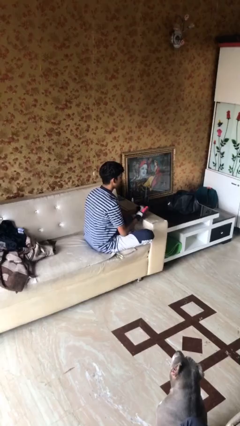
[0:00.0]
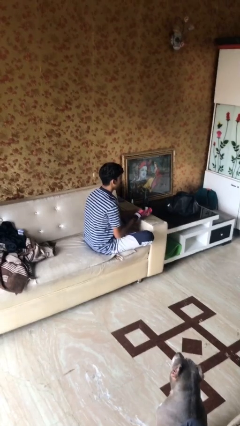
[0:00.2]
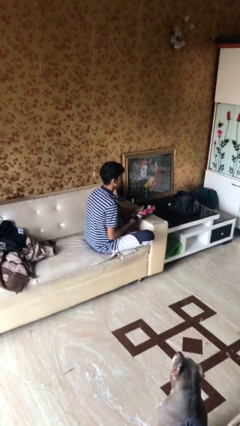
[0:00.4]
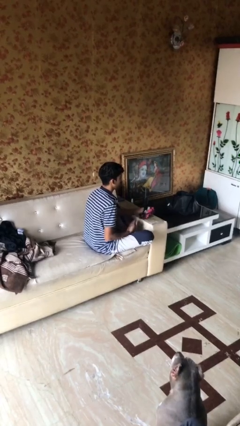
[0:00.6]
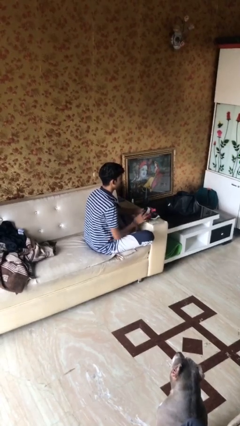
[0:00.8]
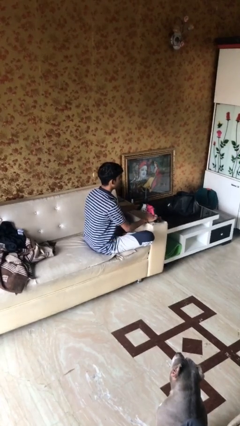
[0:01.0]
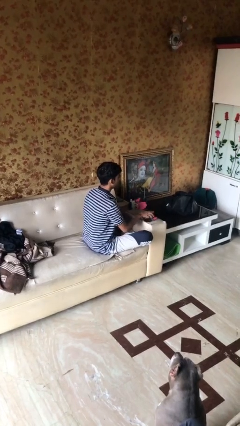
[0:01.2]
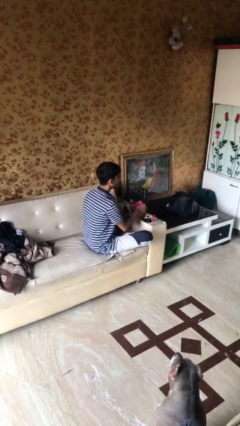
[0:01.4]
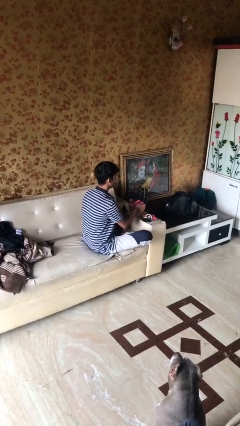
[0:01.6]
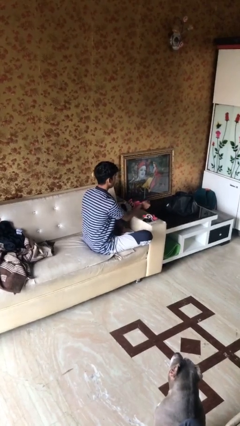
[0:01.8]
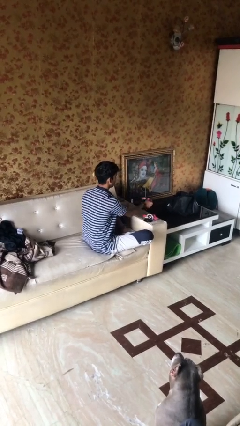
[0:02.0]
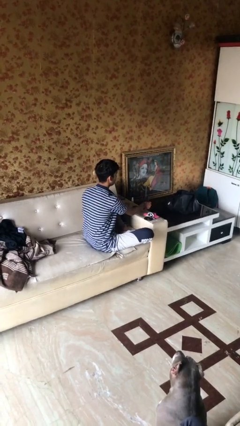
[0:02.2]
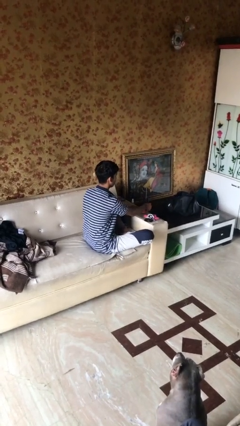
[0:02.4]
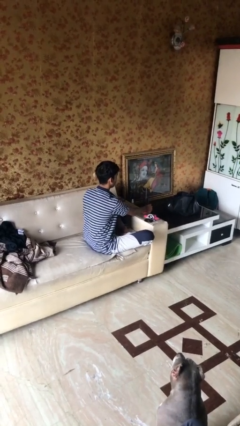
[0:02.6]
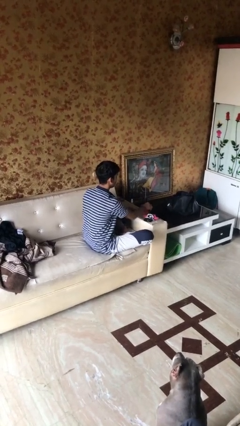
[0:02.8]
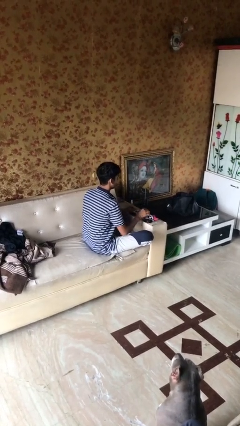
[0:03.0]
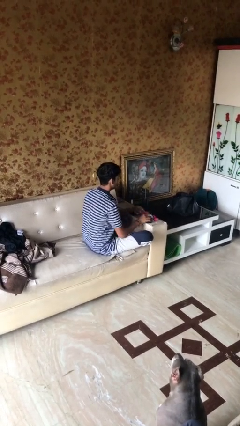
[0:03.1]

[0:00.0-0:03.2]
person takes off gloves

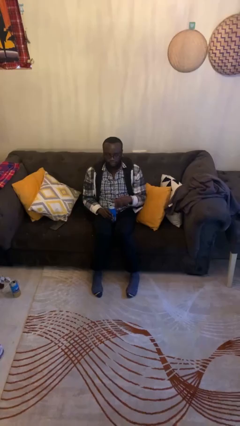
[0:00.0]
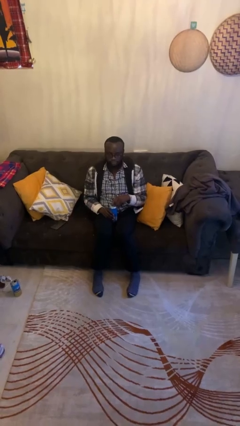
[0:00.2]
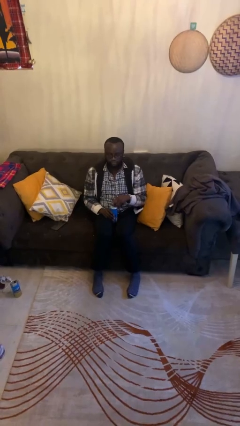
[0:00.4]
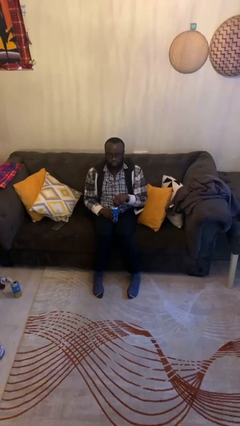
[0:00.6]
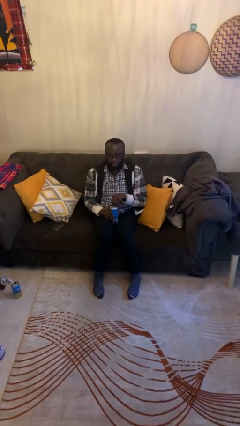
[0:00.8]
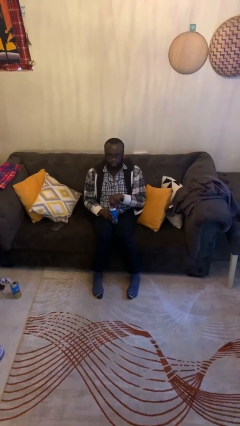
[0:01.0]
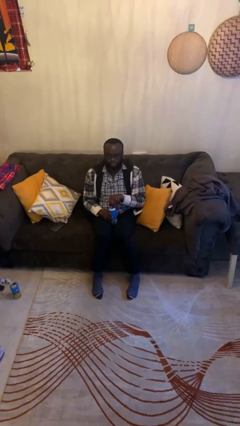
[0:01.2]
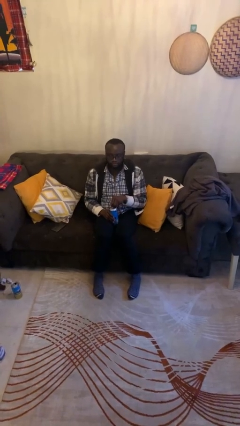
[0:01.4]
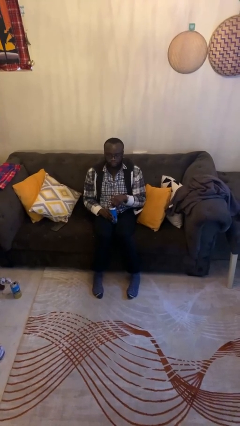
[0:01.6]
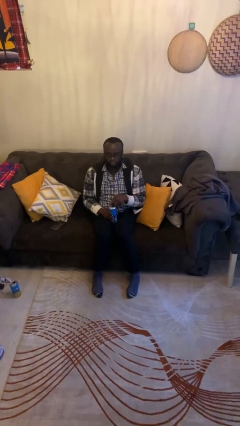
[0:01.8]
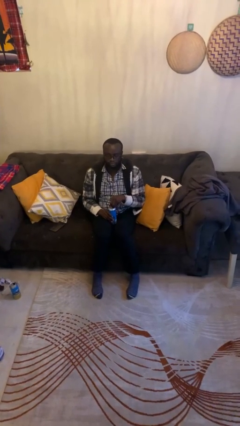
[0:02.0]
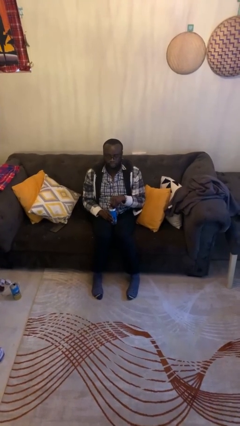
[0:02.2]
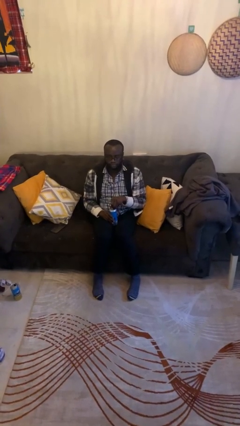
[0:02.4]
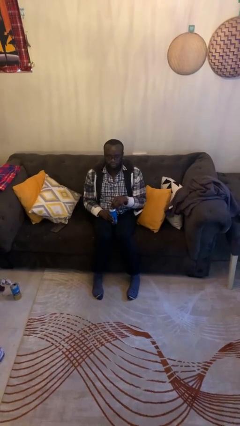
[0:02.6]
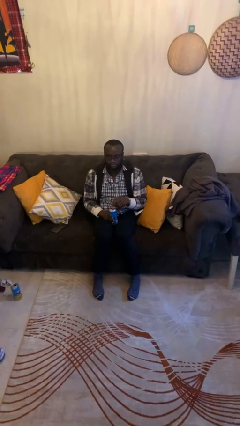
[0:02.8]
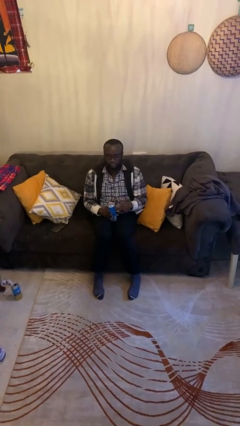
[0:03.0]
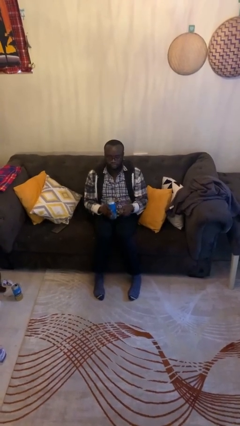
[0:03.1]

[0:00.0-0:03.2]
person opens beverage can

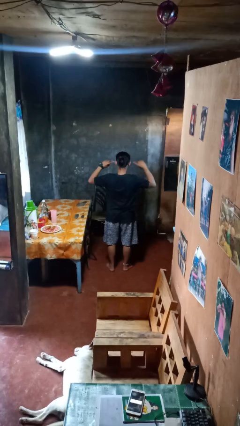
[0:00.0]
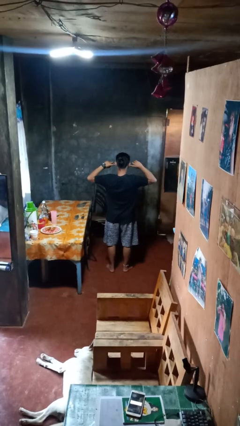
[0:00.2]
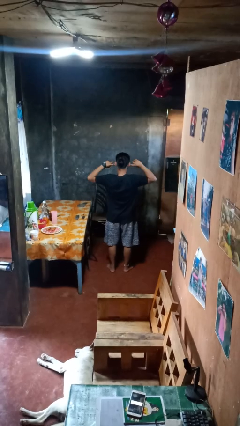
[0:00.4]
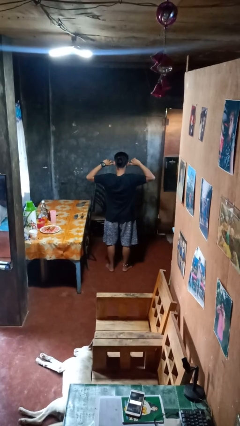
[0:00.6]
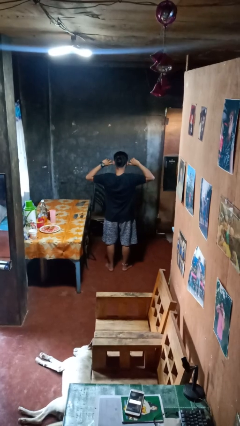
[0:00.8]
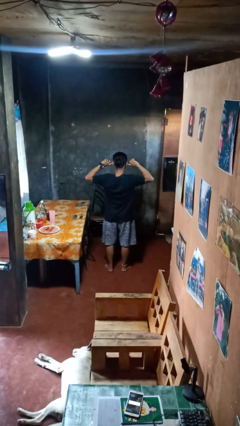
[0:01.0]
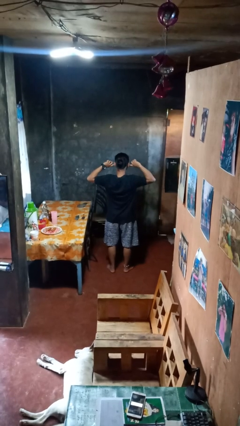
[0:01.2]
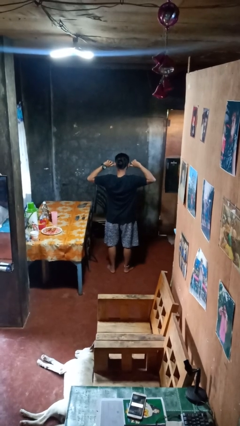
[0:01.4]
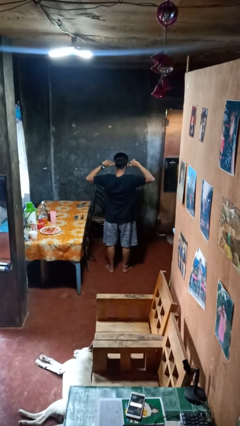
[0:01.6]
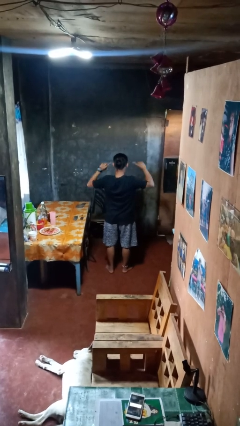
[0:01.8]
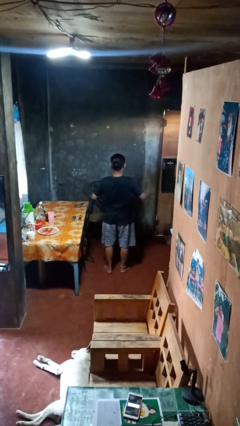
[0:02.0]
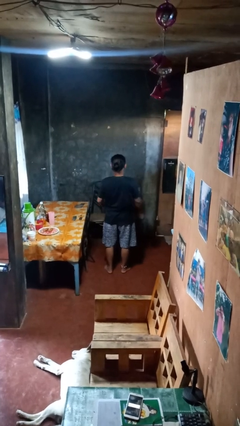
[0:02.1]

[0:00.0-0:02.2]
person puts fingers in ear

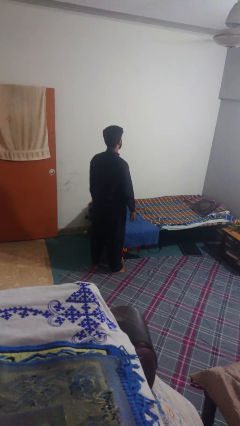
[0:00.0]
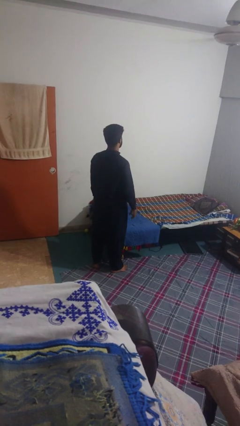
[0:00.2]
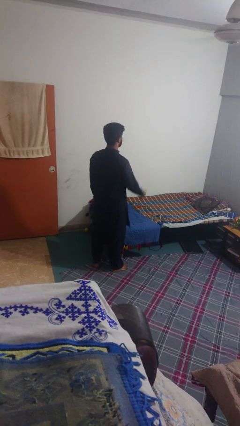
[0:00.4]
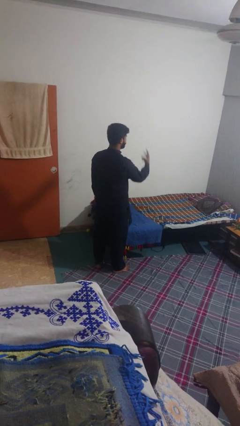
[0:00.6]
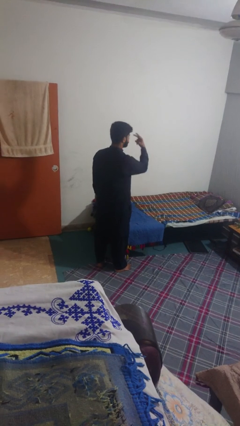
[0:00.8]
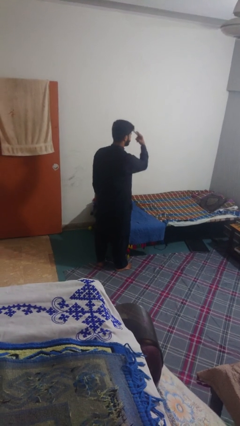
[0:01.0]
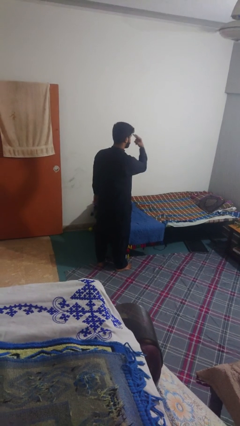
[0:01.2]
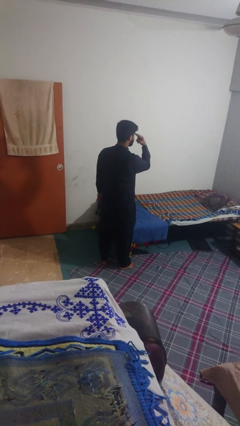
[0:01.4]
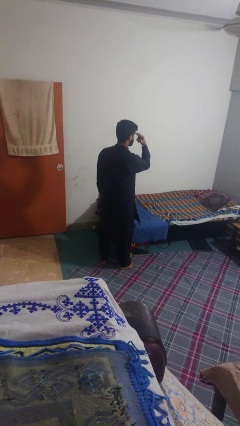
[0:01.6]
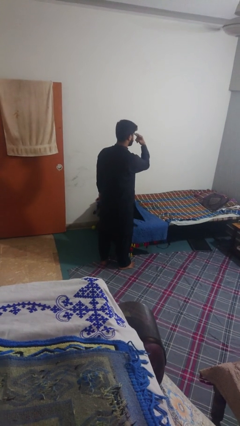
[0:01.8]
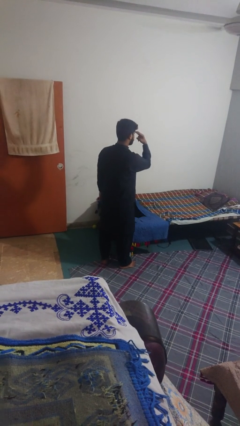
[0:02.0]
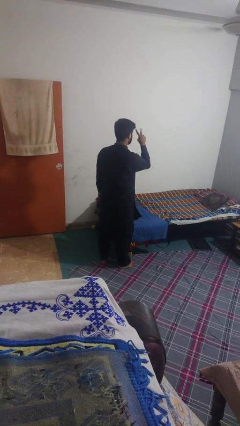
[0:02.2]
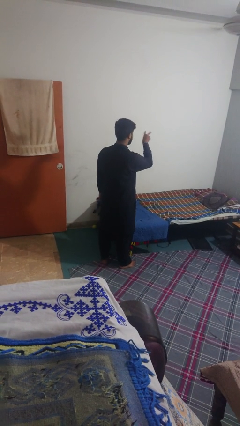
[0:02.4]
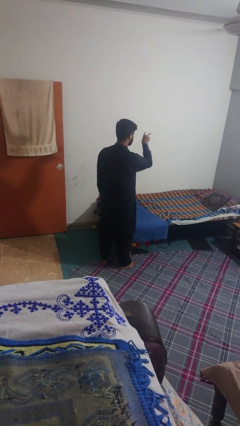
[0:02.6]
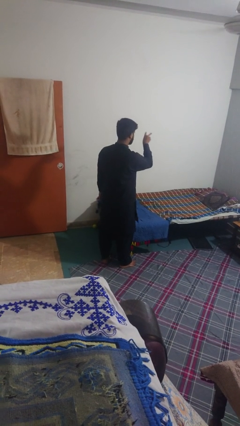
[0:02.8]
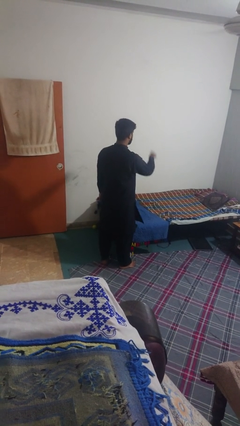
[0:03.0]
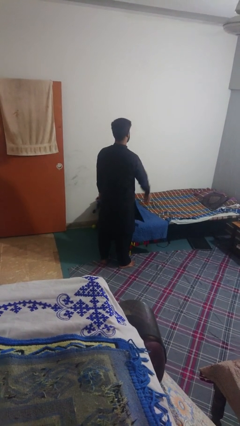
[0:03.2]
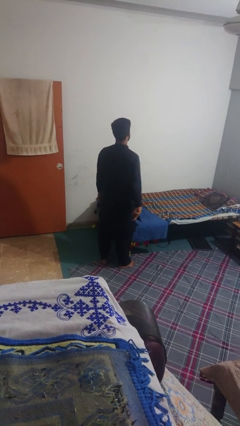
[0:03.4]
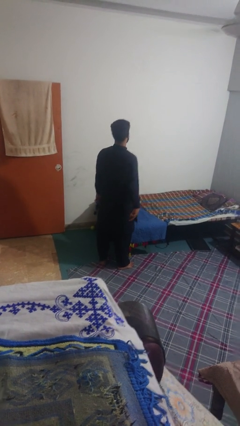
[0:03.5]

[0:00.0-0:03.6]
person gestures watch closely

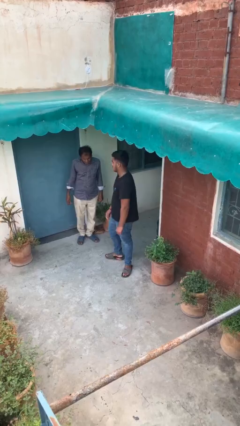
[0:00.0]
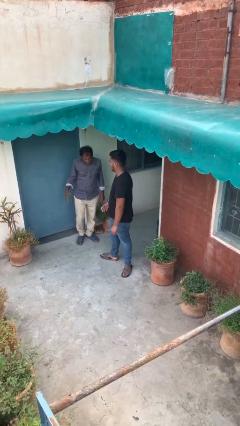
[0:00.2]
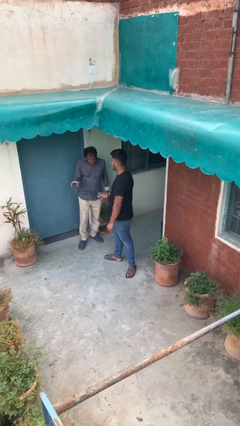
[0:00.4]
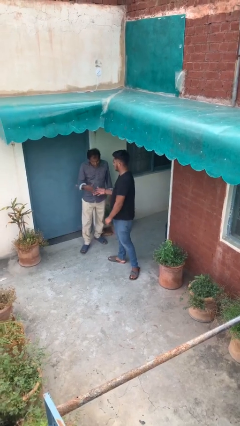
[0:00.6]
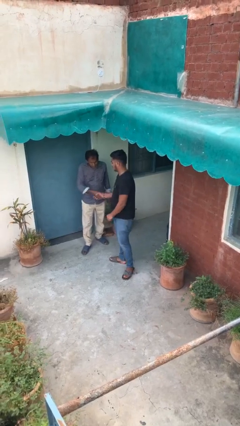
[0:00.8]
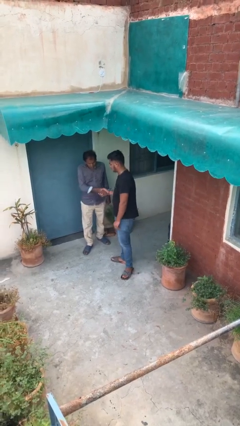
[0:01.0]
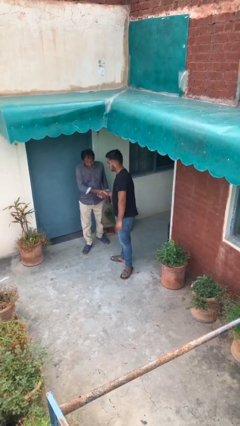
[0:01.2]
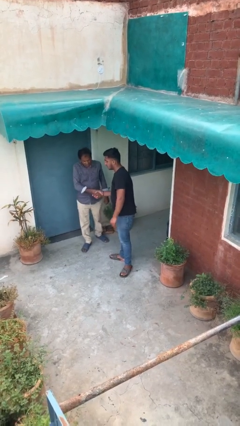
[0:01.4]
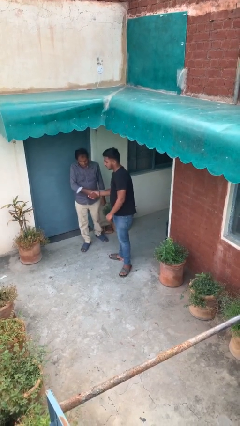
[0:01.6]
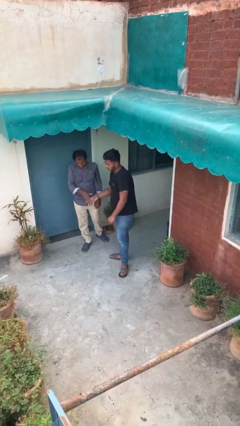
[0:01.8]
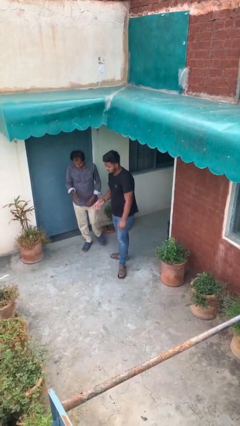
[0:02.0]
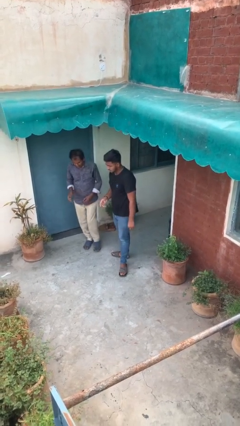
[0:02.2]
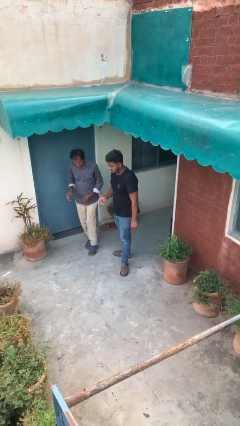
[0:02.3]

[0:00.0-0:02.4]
person shakes hand

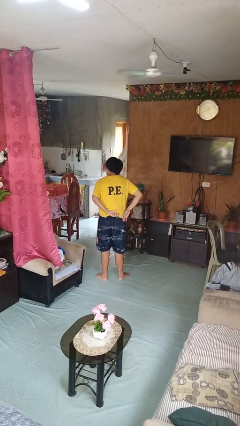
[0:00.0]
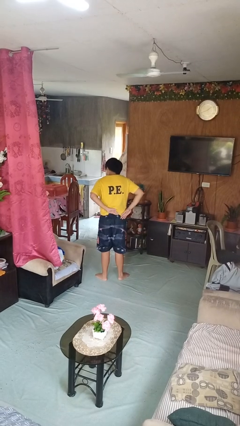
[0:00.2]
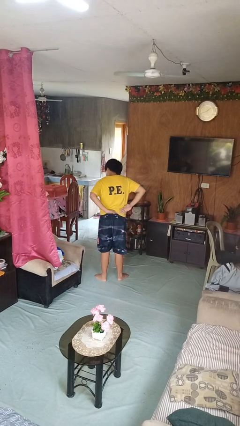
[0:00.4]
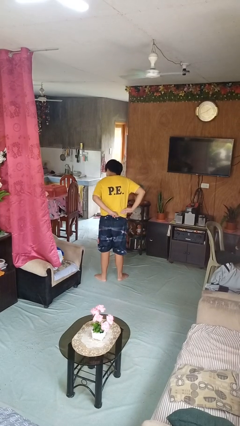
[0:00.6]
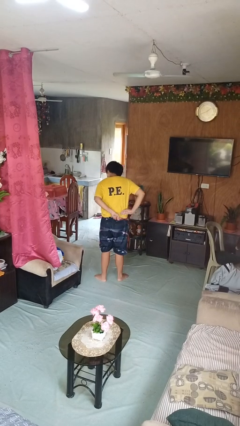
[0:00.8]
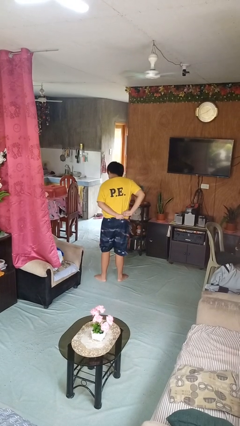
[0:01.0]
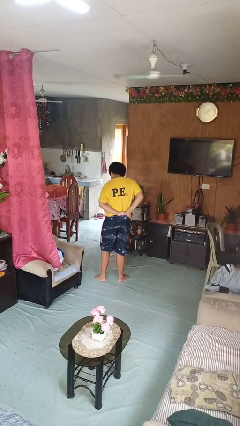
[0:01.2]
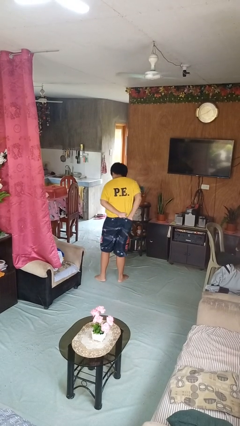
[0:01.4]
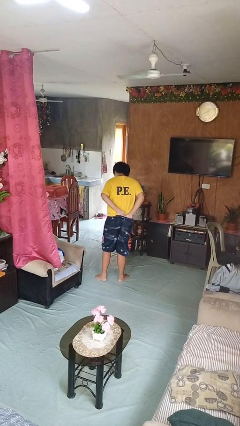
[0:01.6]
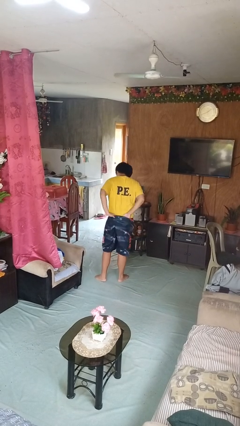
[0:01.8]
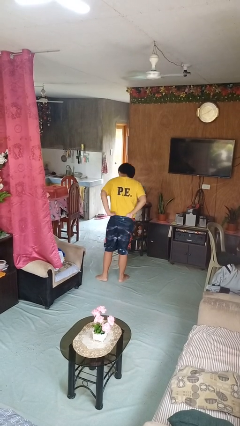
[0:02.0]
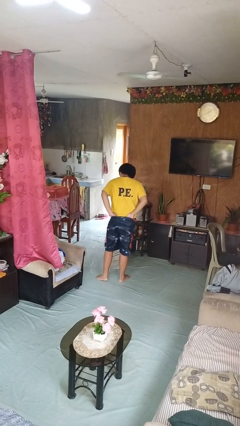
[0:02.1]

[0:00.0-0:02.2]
person tucks in shirt

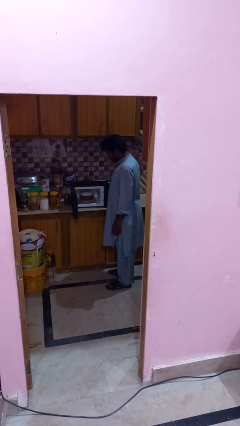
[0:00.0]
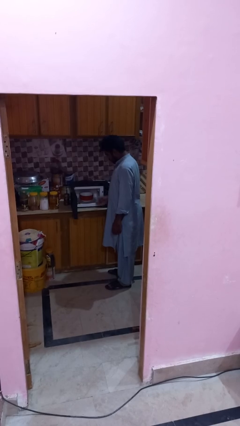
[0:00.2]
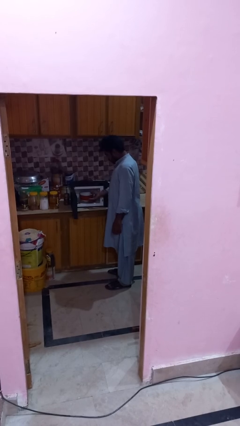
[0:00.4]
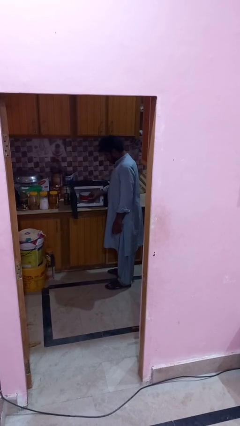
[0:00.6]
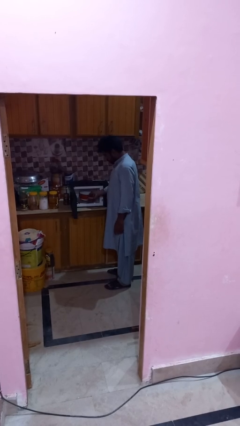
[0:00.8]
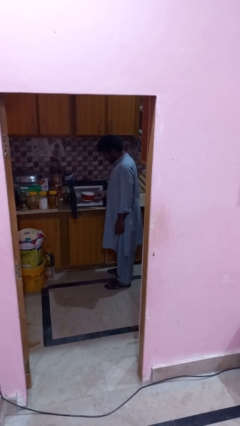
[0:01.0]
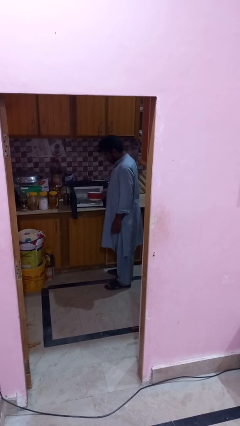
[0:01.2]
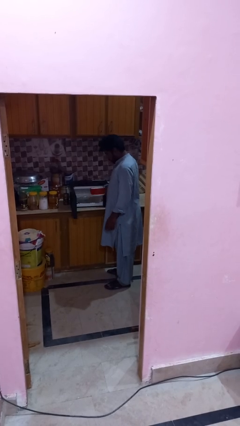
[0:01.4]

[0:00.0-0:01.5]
person takes object from microwave
